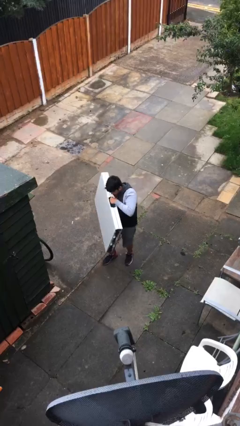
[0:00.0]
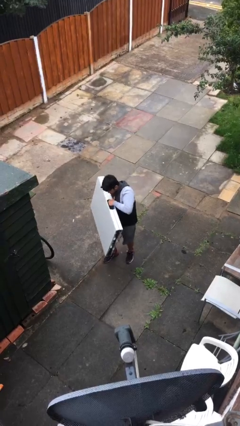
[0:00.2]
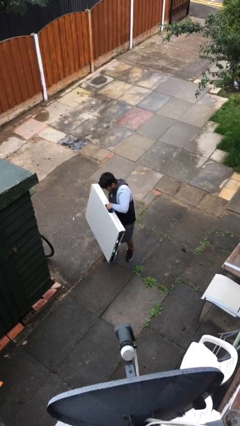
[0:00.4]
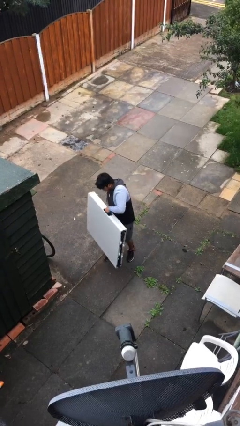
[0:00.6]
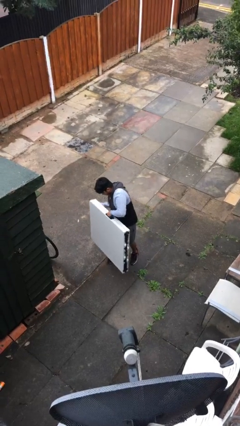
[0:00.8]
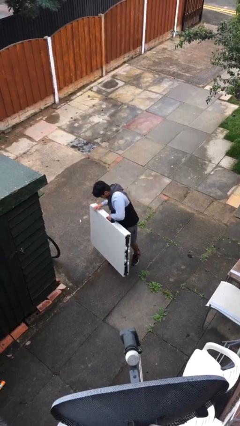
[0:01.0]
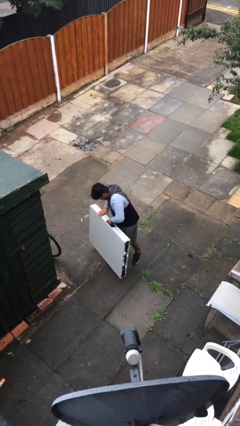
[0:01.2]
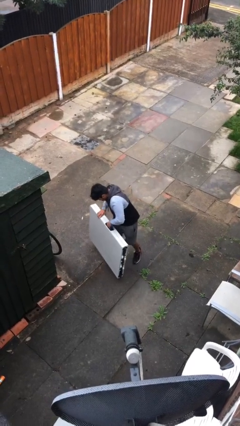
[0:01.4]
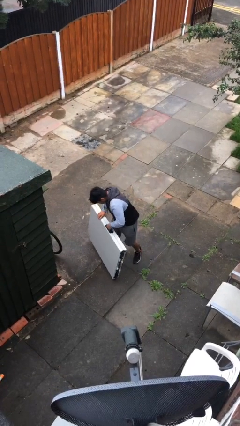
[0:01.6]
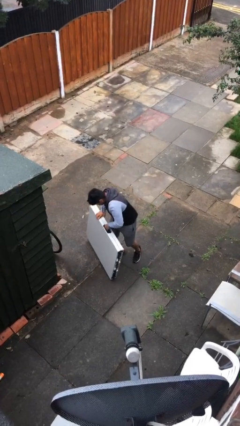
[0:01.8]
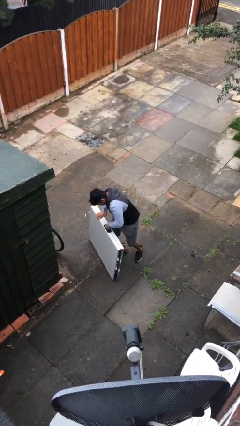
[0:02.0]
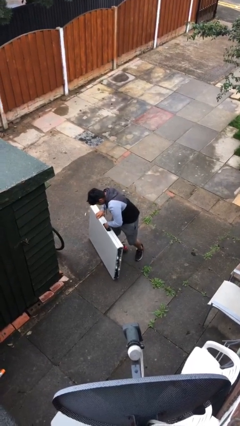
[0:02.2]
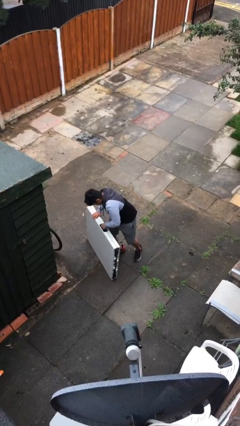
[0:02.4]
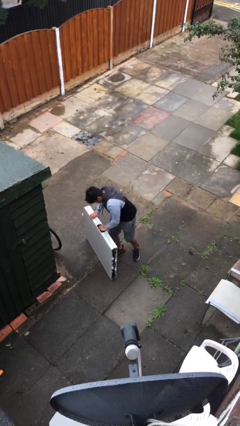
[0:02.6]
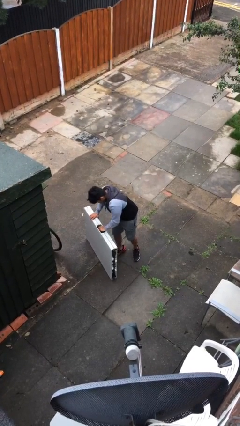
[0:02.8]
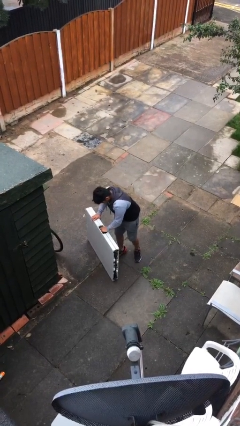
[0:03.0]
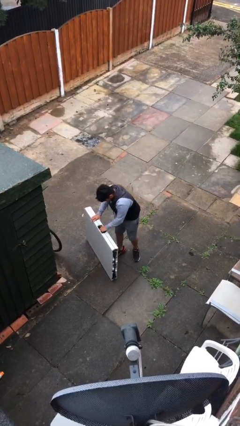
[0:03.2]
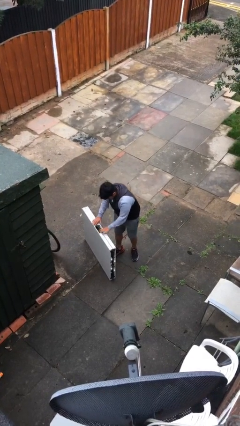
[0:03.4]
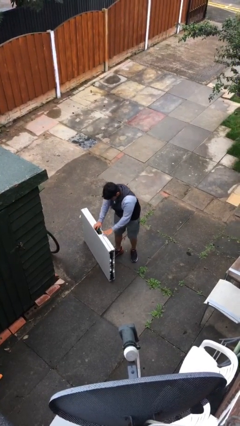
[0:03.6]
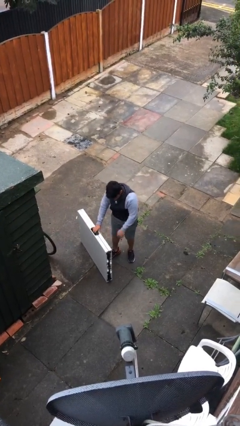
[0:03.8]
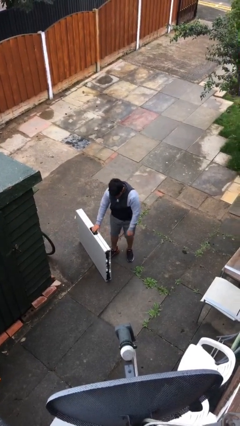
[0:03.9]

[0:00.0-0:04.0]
person puts down object on floor

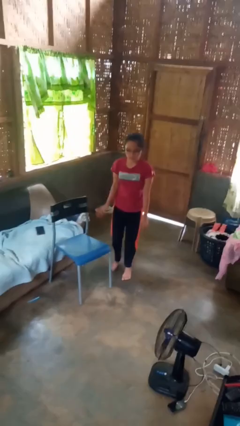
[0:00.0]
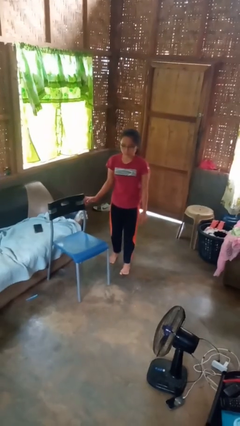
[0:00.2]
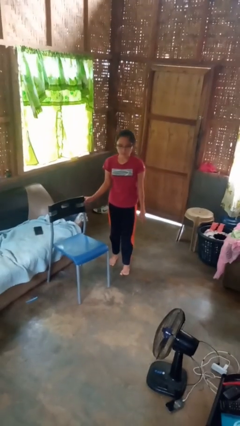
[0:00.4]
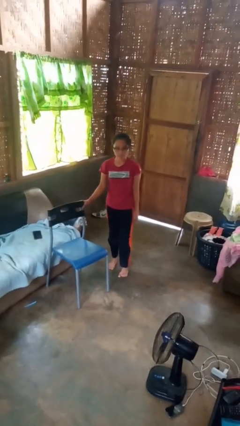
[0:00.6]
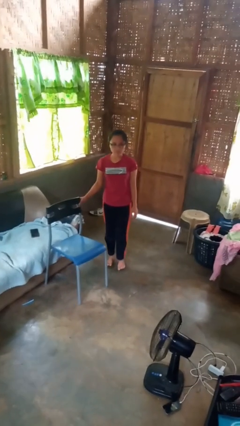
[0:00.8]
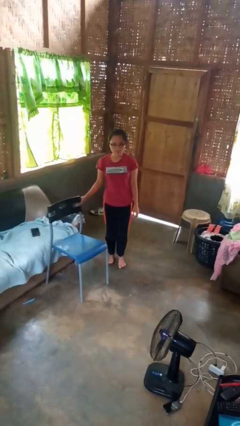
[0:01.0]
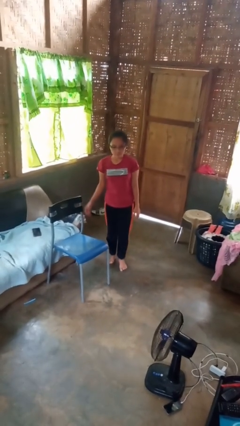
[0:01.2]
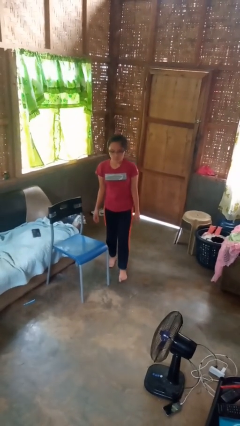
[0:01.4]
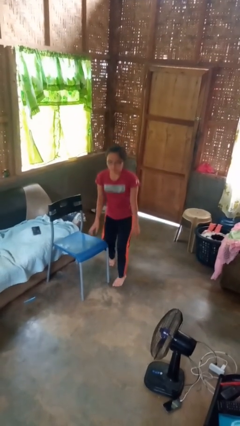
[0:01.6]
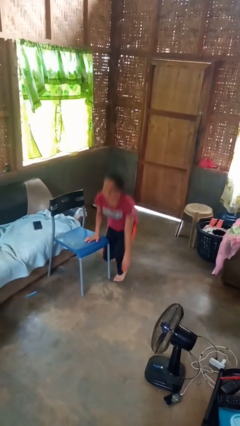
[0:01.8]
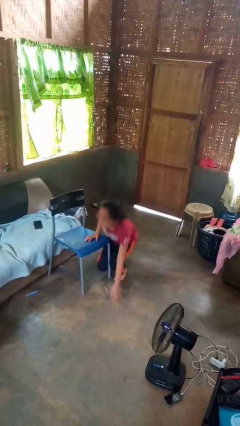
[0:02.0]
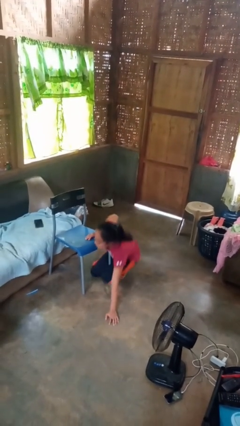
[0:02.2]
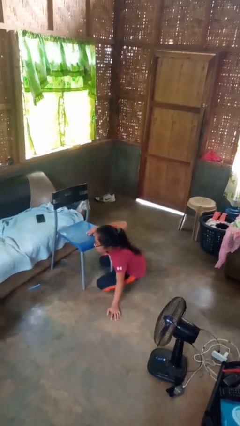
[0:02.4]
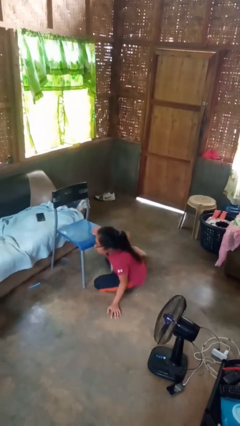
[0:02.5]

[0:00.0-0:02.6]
person trips on object on floor

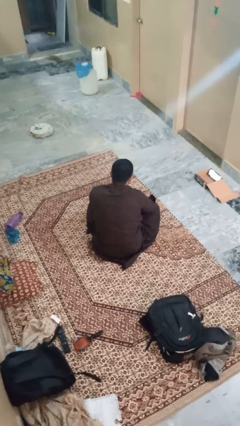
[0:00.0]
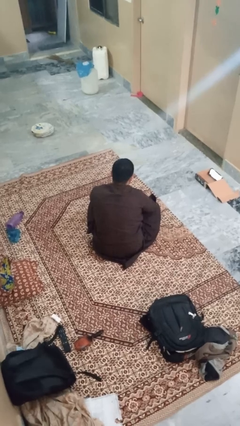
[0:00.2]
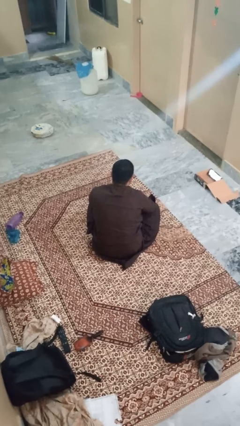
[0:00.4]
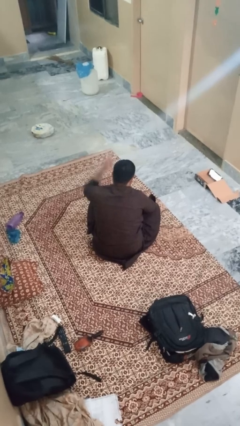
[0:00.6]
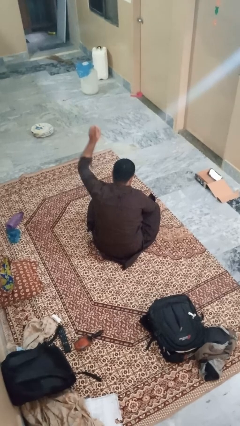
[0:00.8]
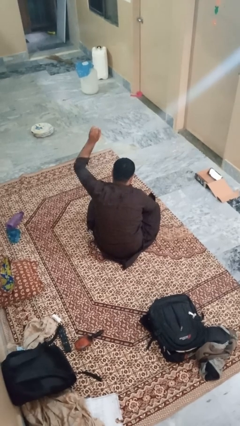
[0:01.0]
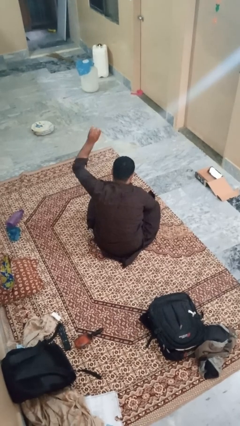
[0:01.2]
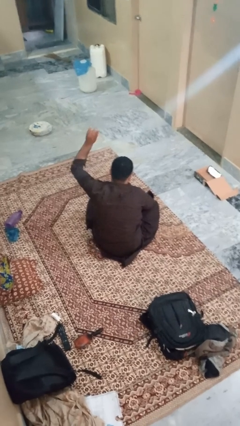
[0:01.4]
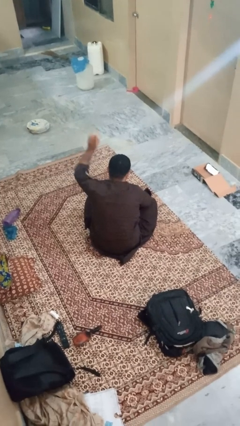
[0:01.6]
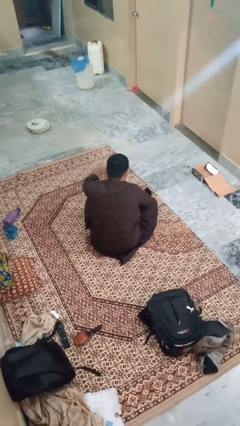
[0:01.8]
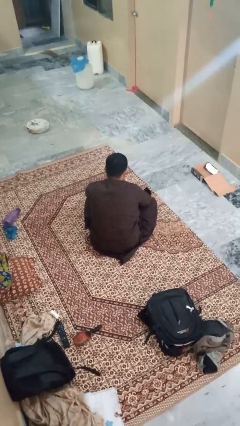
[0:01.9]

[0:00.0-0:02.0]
person gestures number one

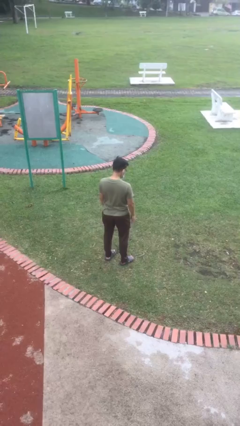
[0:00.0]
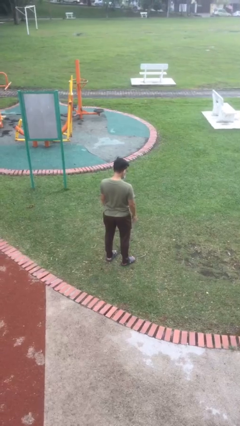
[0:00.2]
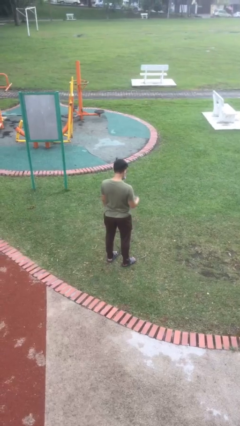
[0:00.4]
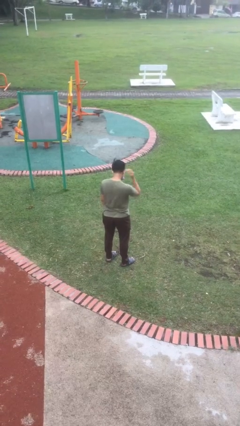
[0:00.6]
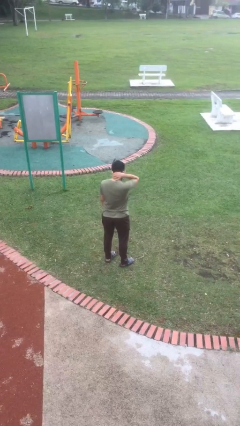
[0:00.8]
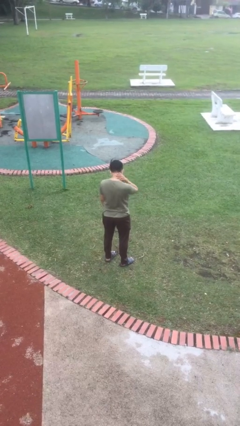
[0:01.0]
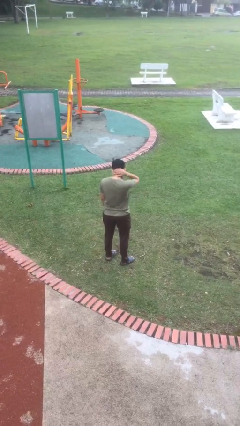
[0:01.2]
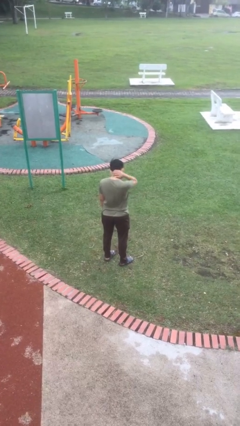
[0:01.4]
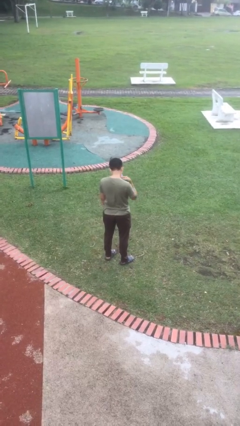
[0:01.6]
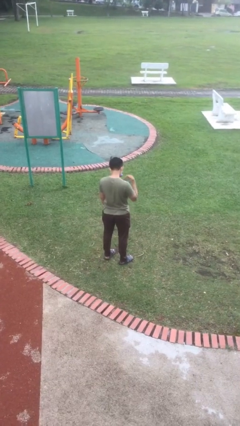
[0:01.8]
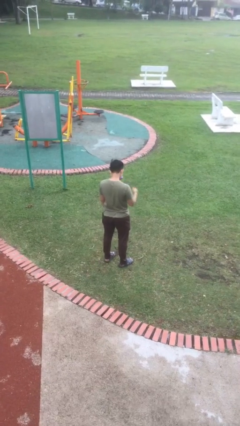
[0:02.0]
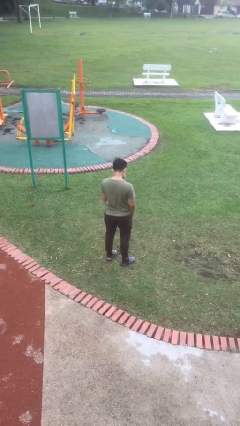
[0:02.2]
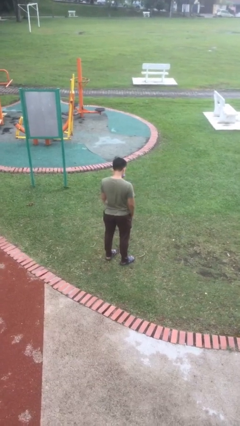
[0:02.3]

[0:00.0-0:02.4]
person rubs neck

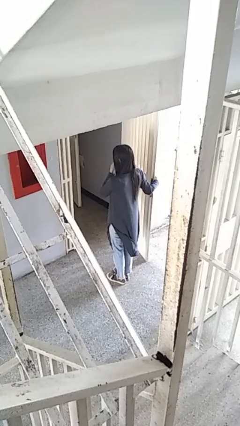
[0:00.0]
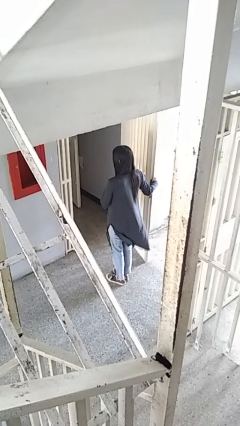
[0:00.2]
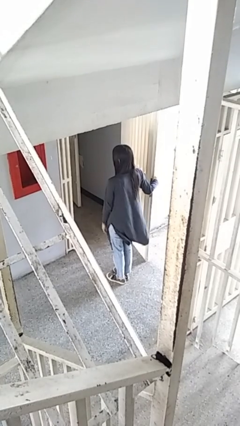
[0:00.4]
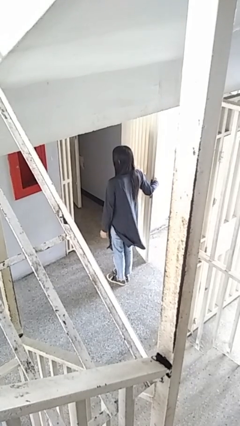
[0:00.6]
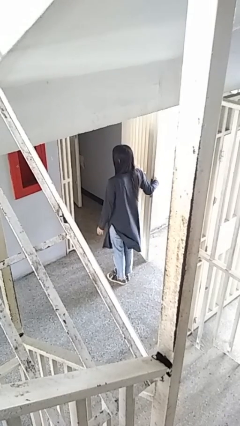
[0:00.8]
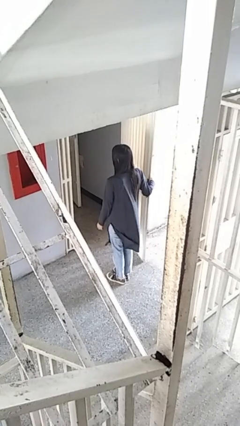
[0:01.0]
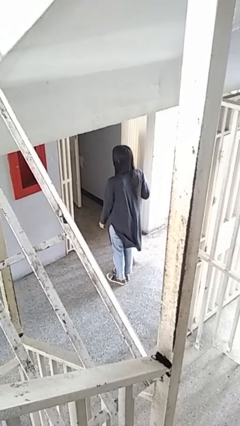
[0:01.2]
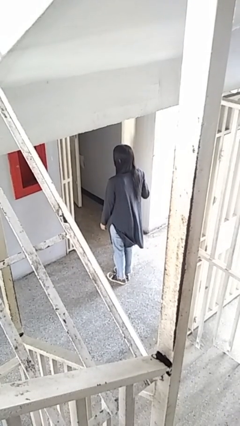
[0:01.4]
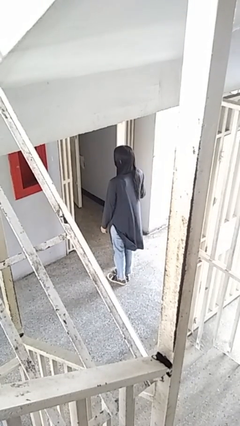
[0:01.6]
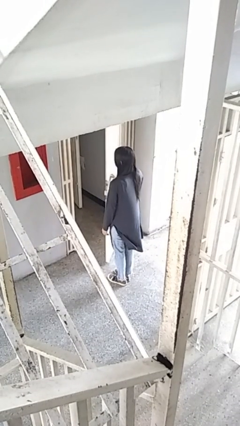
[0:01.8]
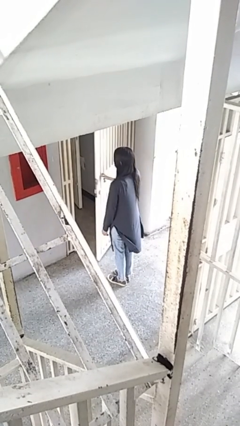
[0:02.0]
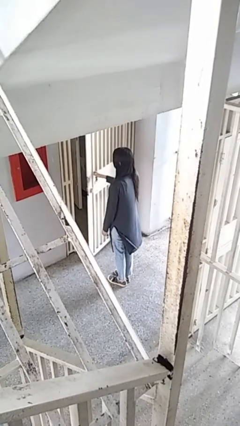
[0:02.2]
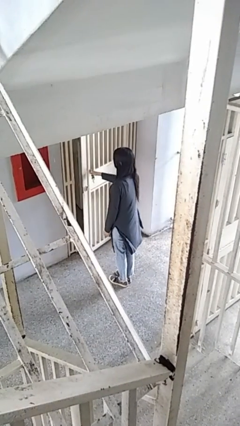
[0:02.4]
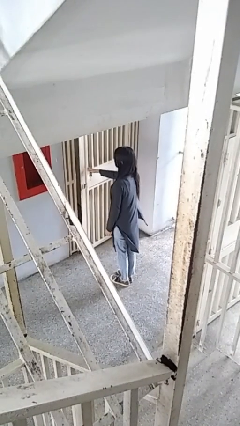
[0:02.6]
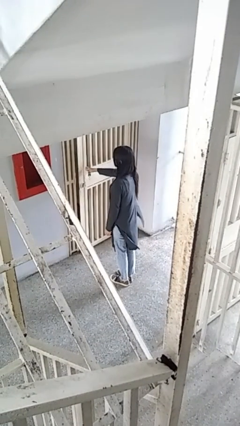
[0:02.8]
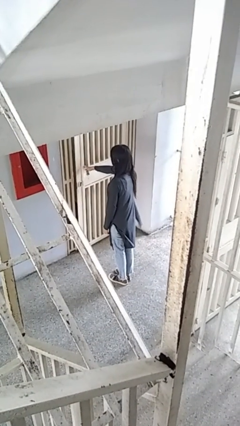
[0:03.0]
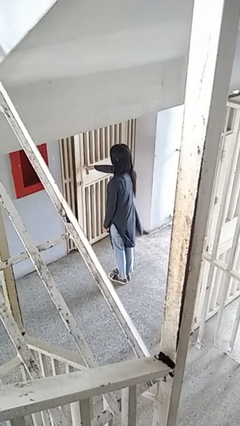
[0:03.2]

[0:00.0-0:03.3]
person closes gate

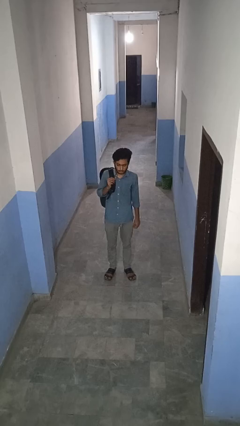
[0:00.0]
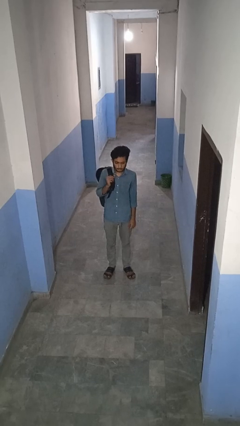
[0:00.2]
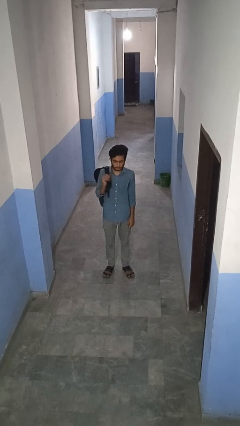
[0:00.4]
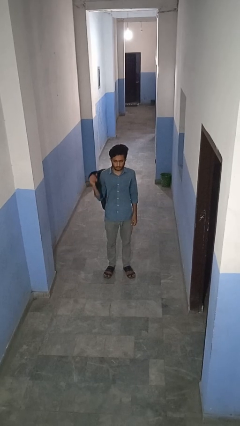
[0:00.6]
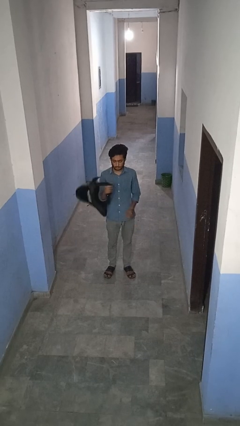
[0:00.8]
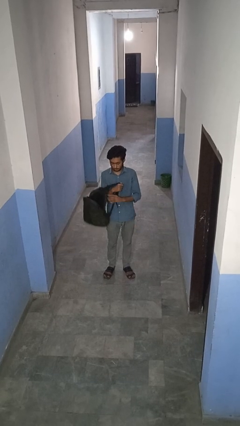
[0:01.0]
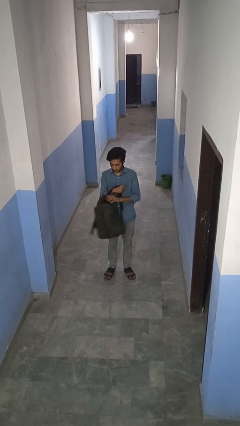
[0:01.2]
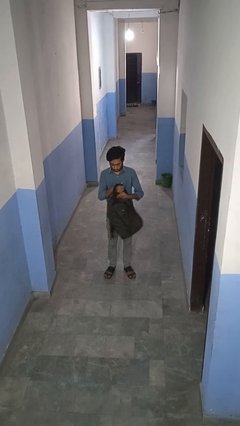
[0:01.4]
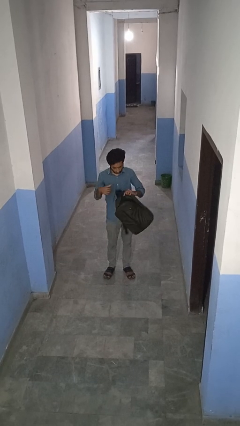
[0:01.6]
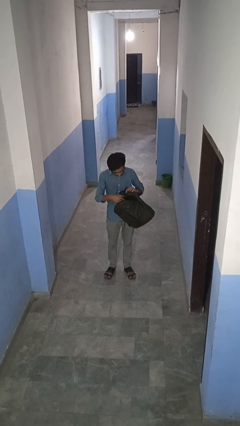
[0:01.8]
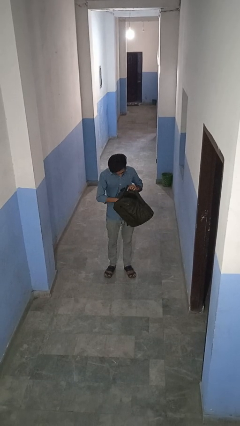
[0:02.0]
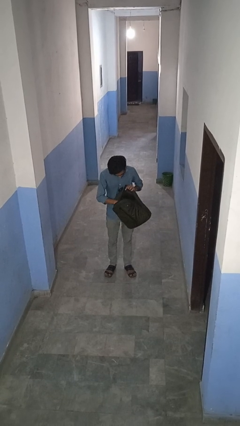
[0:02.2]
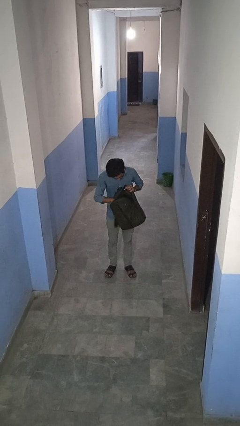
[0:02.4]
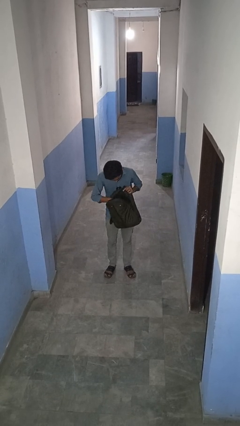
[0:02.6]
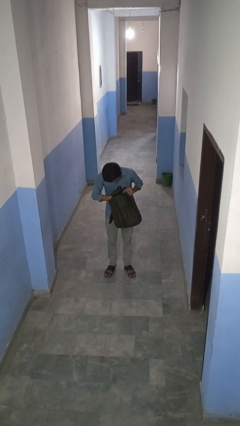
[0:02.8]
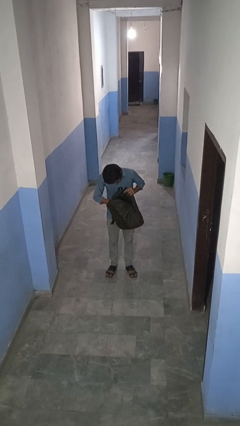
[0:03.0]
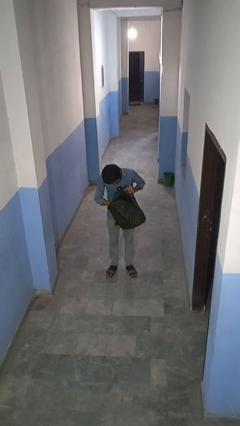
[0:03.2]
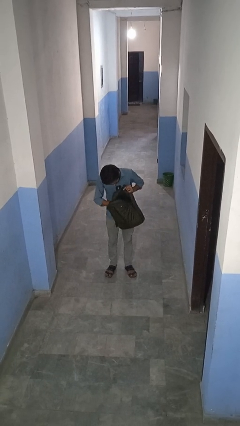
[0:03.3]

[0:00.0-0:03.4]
person searches in backpack
